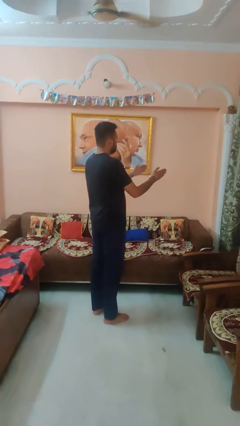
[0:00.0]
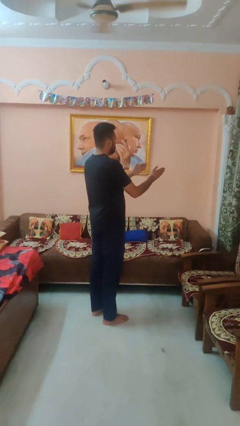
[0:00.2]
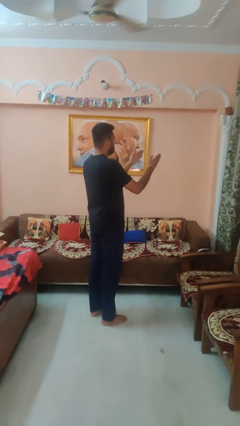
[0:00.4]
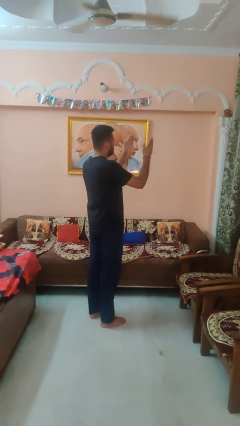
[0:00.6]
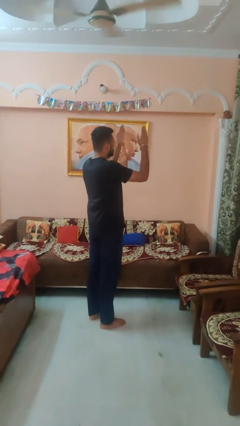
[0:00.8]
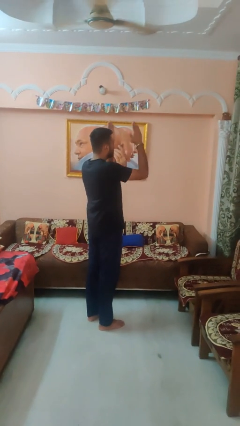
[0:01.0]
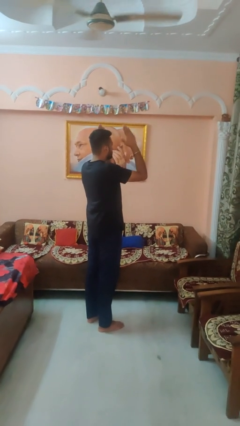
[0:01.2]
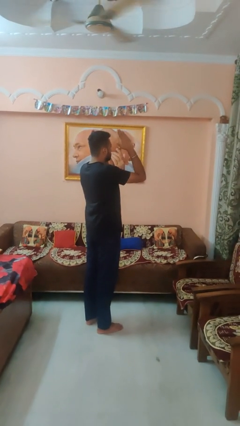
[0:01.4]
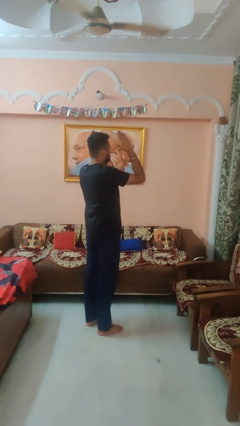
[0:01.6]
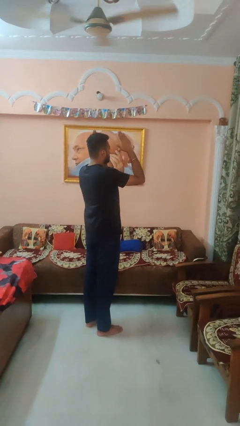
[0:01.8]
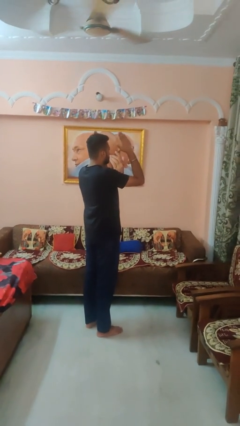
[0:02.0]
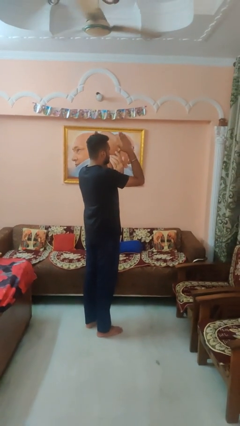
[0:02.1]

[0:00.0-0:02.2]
person gestures swipe up

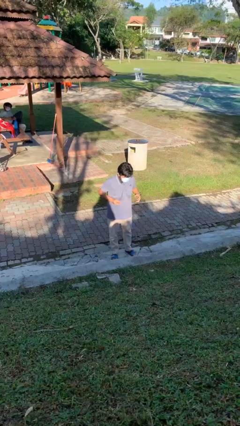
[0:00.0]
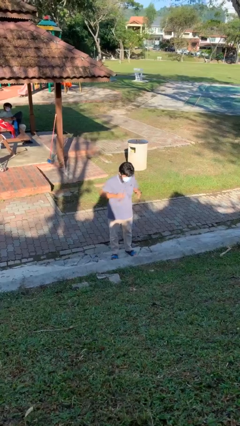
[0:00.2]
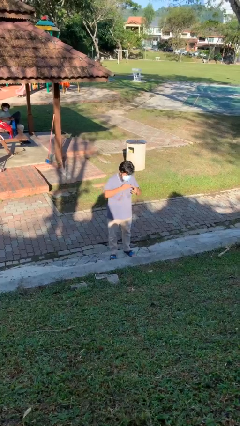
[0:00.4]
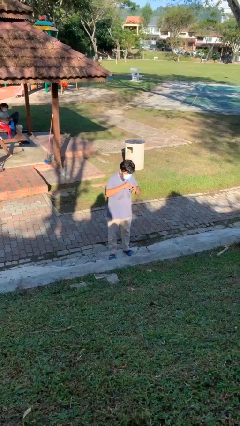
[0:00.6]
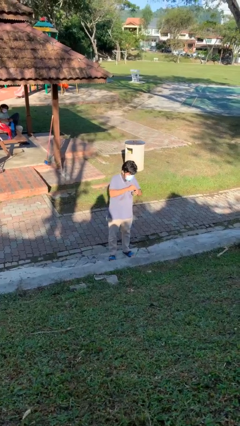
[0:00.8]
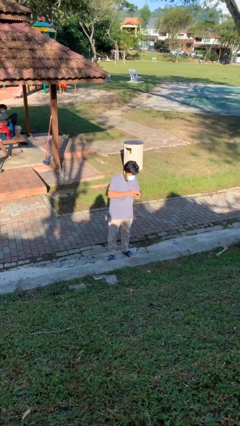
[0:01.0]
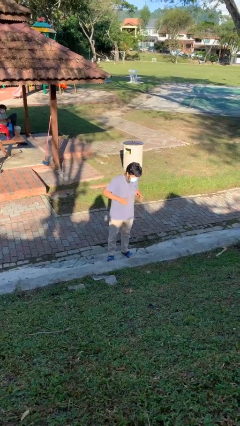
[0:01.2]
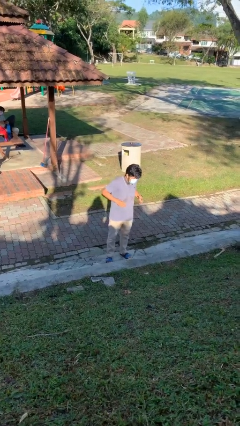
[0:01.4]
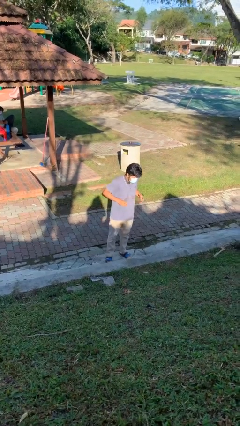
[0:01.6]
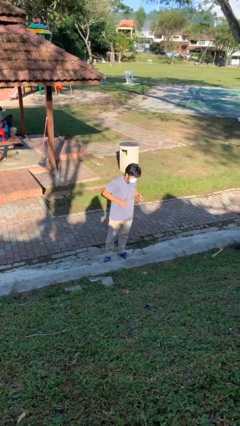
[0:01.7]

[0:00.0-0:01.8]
person puts on ring

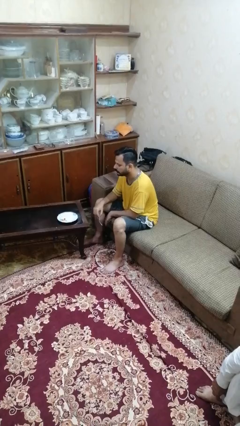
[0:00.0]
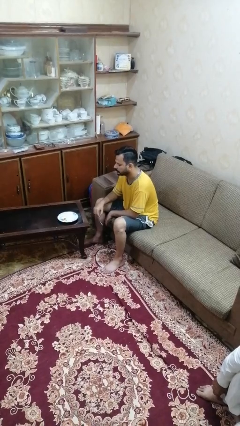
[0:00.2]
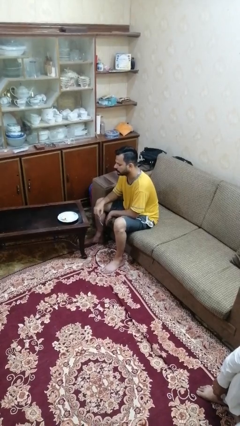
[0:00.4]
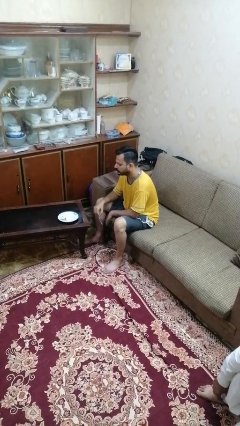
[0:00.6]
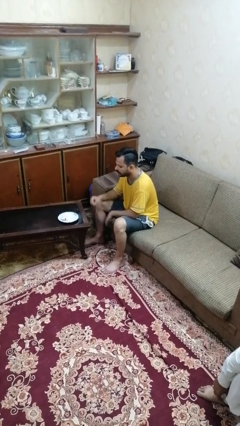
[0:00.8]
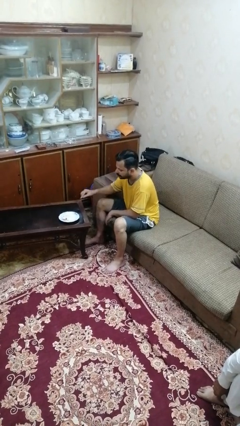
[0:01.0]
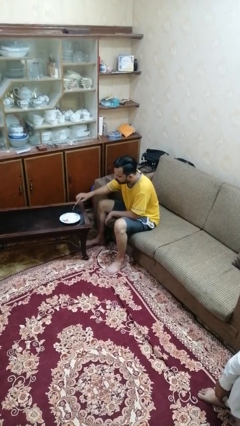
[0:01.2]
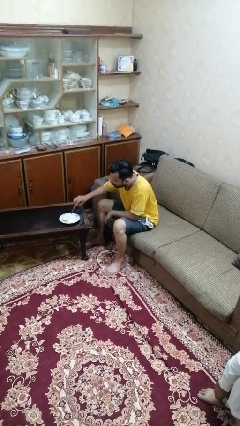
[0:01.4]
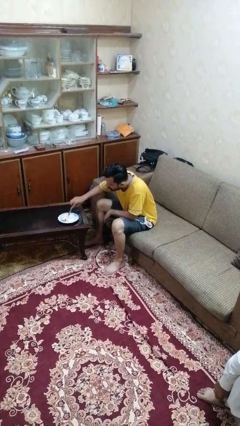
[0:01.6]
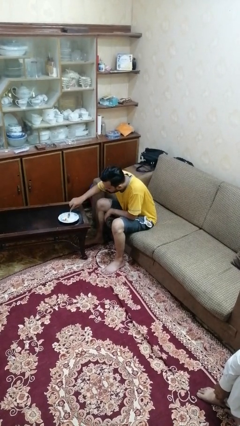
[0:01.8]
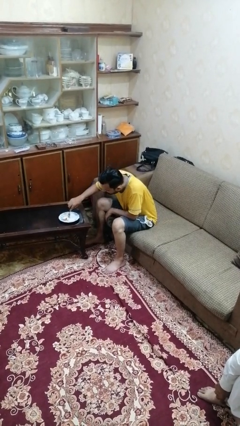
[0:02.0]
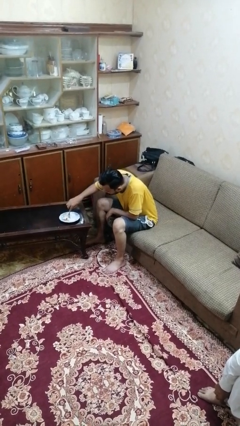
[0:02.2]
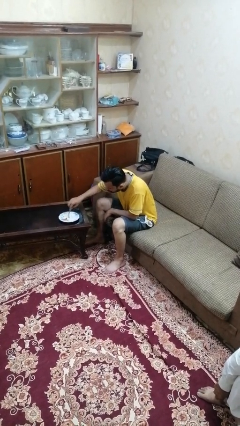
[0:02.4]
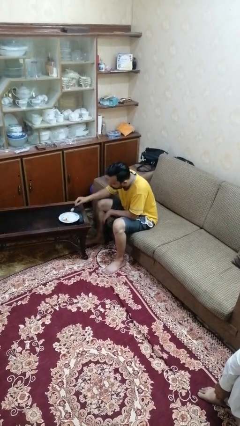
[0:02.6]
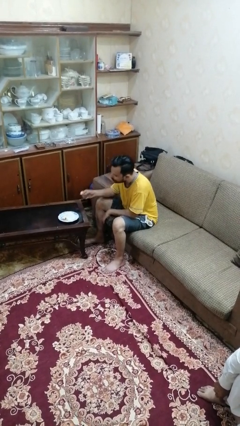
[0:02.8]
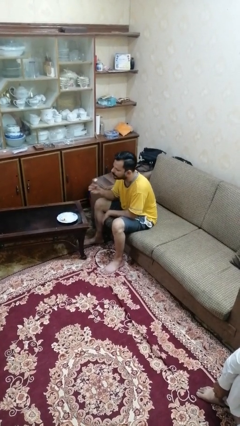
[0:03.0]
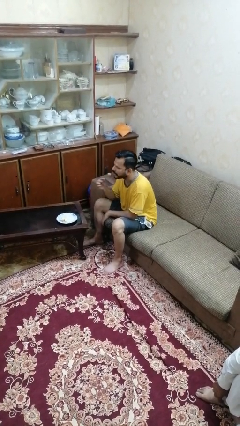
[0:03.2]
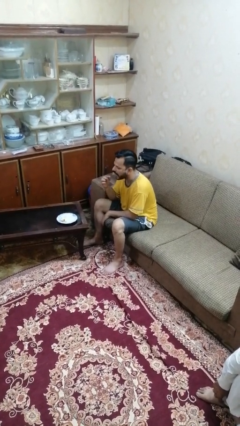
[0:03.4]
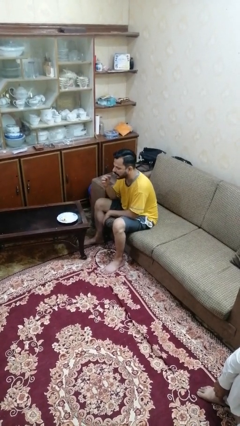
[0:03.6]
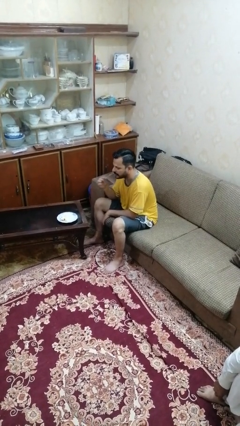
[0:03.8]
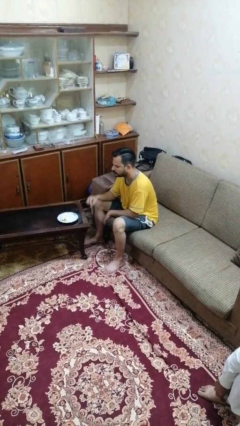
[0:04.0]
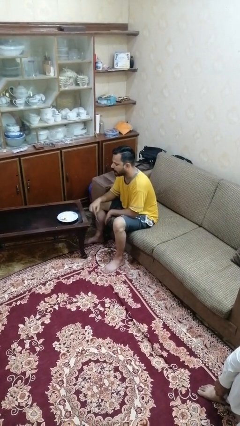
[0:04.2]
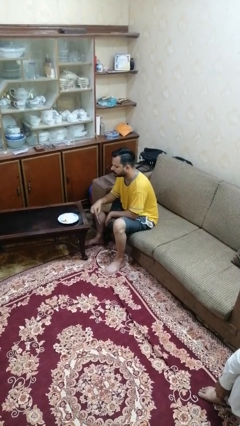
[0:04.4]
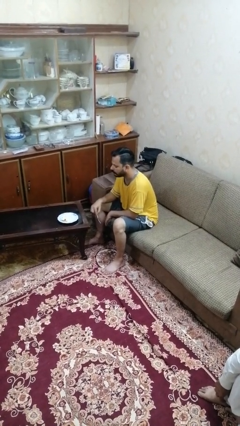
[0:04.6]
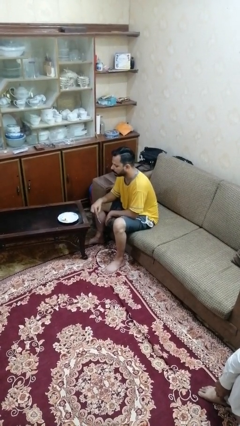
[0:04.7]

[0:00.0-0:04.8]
person eats with utensil

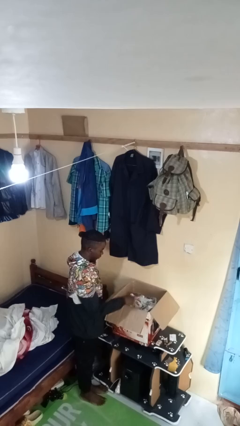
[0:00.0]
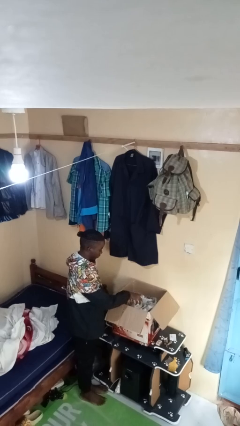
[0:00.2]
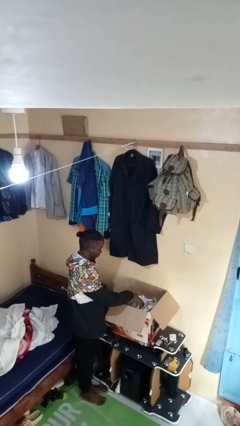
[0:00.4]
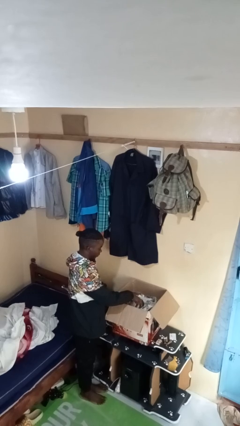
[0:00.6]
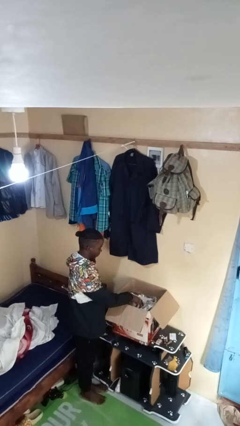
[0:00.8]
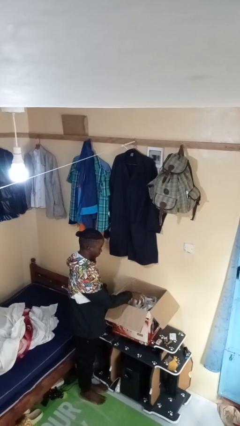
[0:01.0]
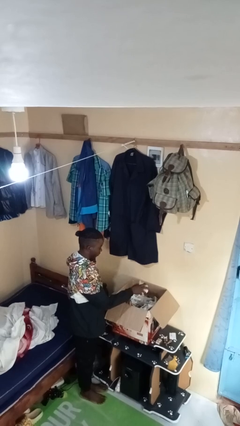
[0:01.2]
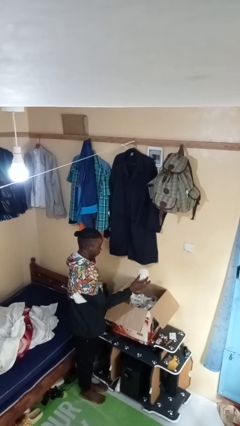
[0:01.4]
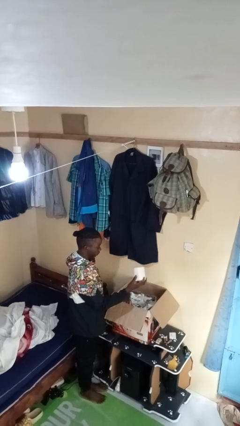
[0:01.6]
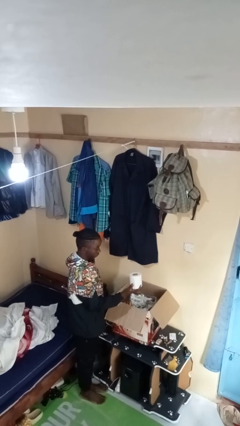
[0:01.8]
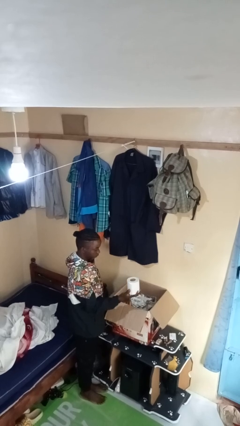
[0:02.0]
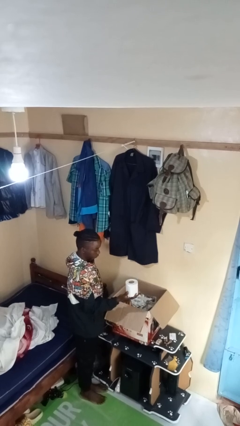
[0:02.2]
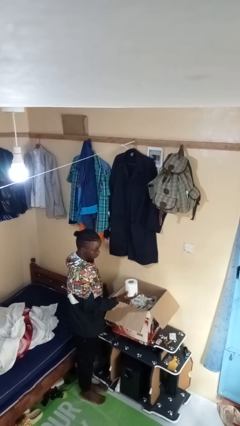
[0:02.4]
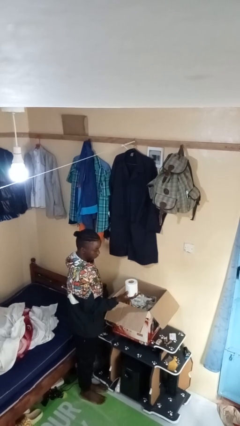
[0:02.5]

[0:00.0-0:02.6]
person takes object from box

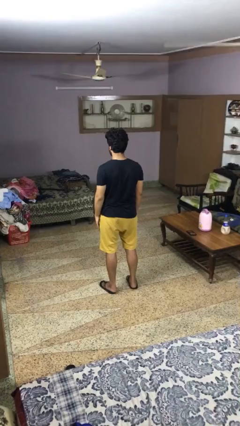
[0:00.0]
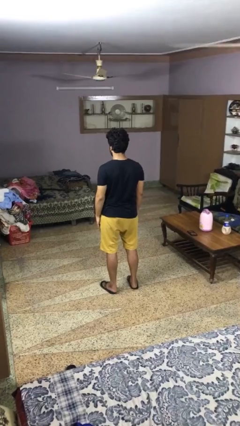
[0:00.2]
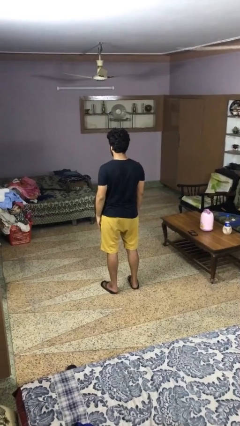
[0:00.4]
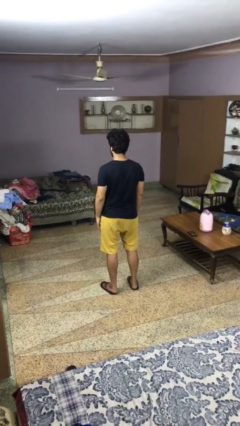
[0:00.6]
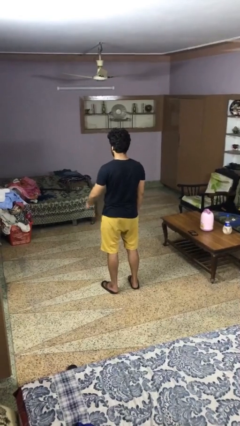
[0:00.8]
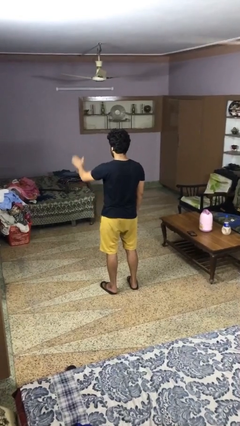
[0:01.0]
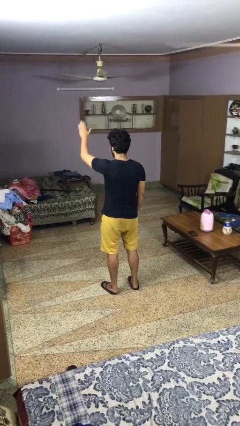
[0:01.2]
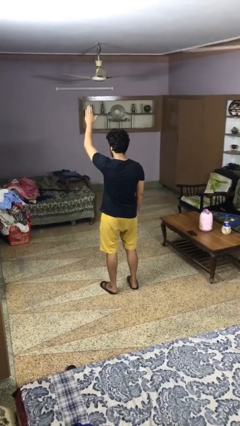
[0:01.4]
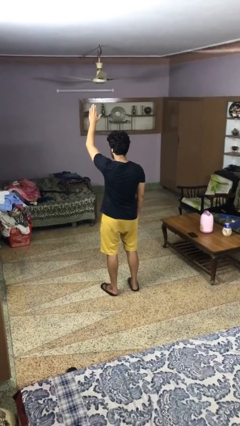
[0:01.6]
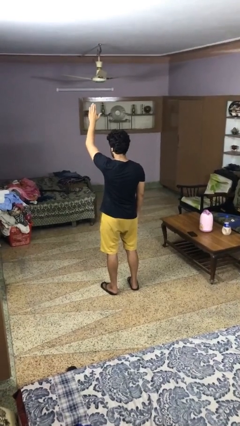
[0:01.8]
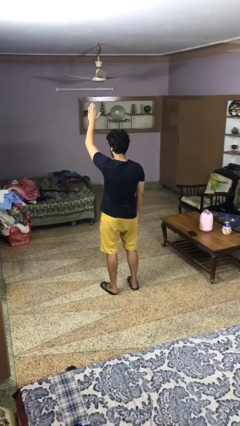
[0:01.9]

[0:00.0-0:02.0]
person gestures raise hand

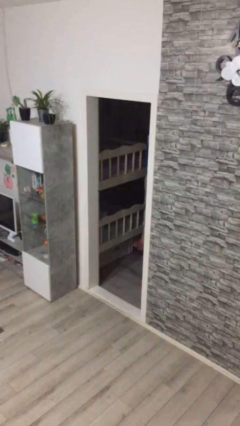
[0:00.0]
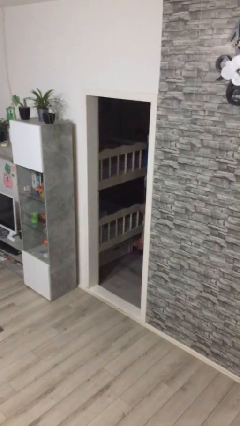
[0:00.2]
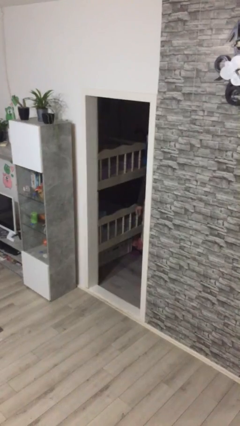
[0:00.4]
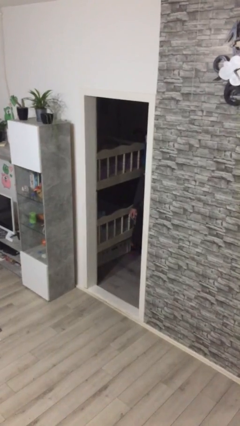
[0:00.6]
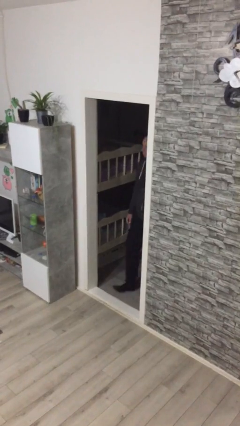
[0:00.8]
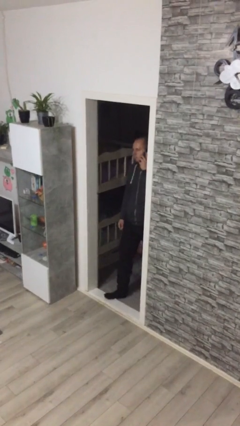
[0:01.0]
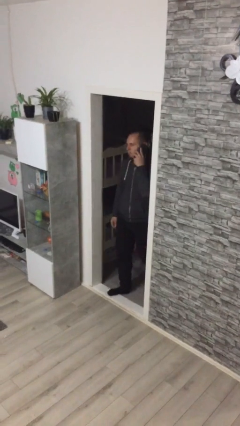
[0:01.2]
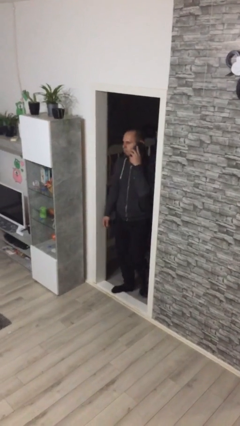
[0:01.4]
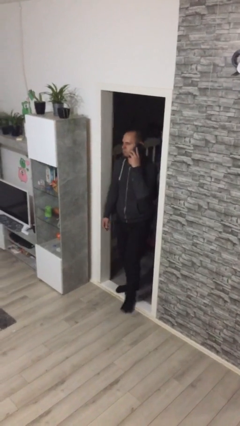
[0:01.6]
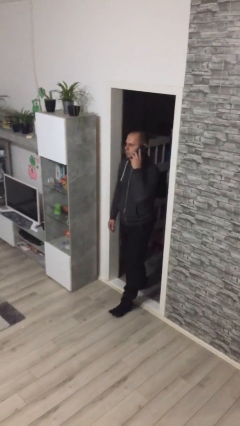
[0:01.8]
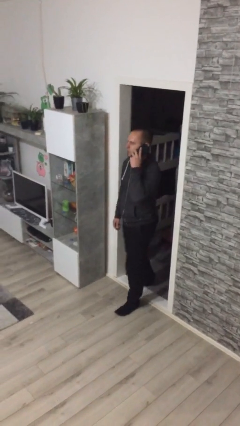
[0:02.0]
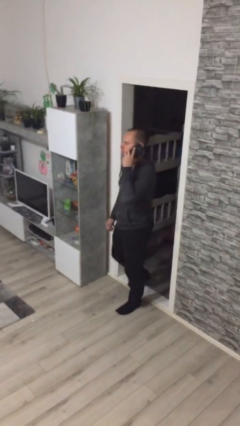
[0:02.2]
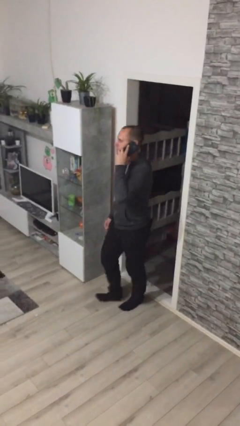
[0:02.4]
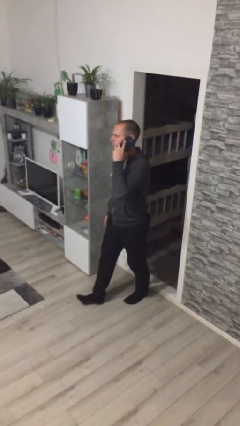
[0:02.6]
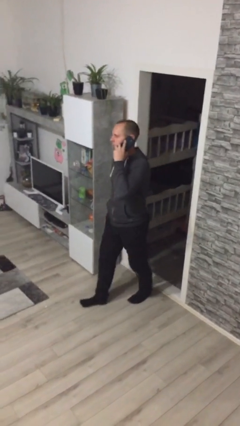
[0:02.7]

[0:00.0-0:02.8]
person enters scene through structure

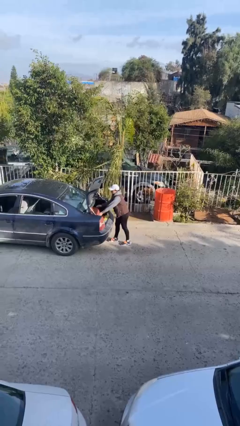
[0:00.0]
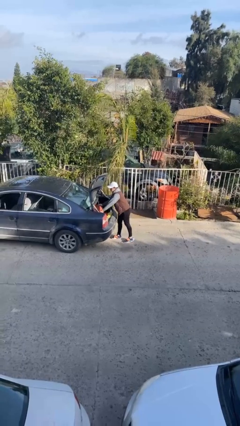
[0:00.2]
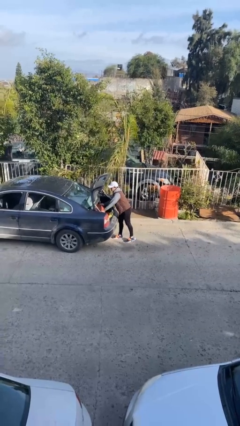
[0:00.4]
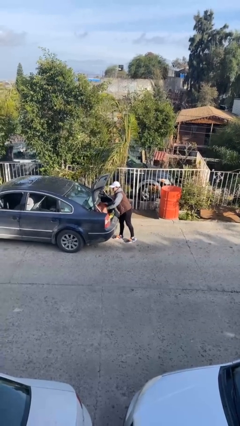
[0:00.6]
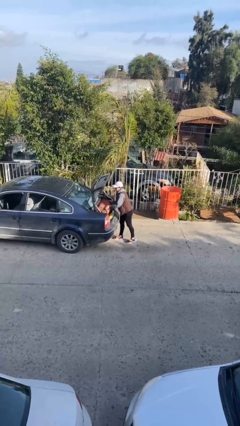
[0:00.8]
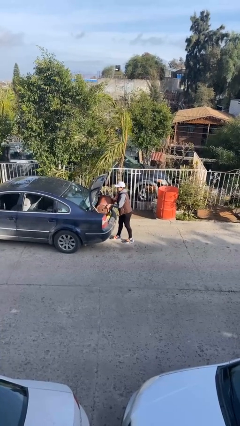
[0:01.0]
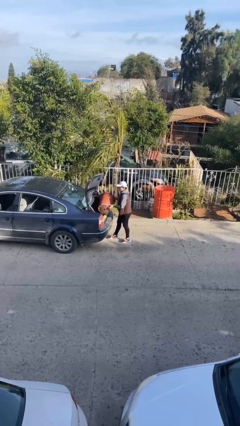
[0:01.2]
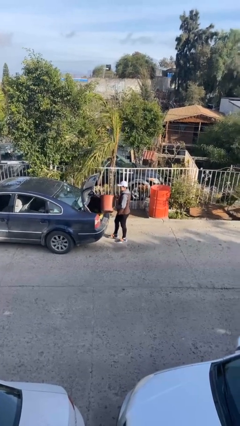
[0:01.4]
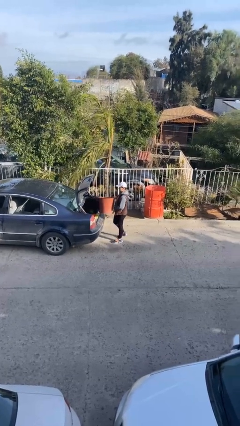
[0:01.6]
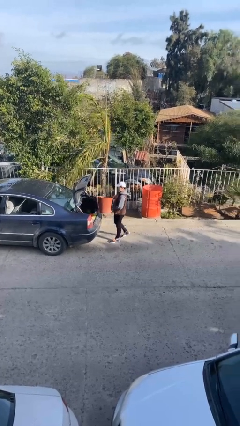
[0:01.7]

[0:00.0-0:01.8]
person unloads car
